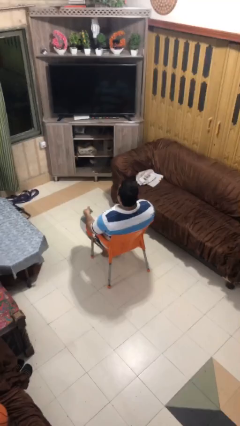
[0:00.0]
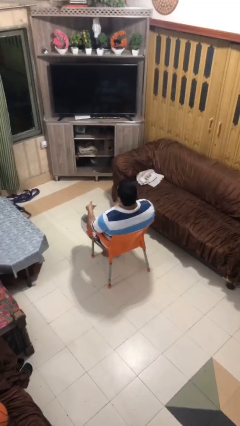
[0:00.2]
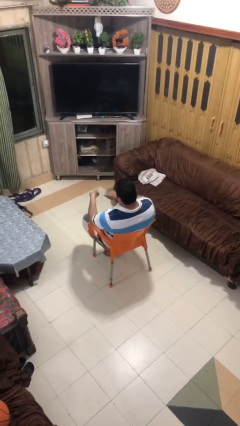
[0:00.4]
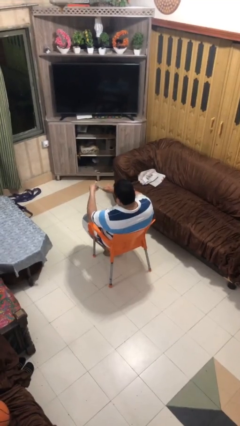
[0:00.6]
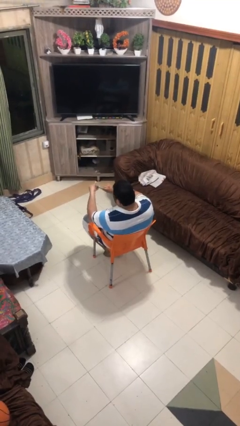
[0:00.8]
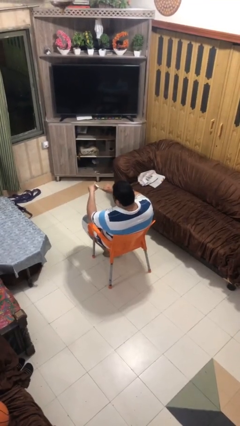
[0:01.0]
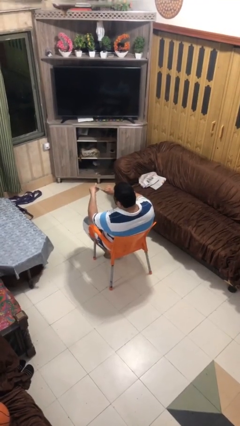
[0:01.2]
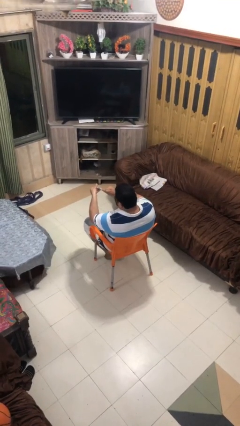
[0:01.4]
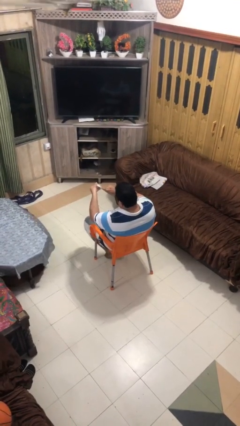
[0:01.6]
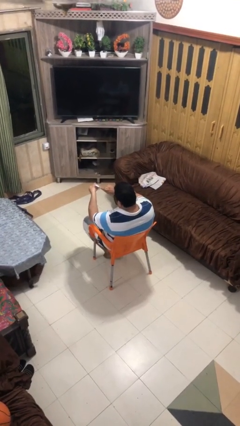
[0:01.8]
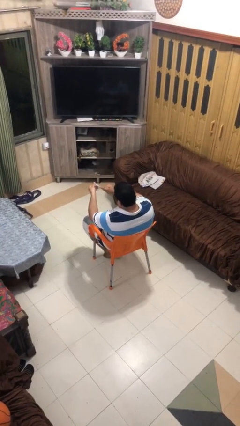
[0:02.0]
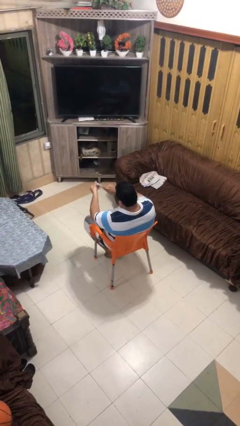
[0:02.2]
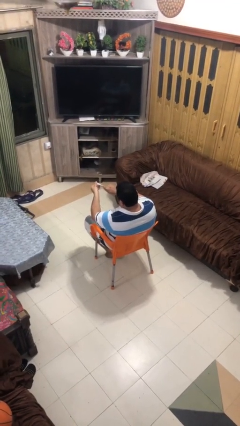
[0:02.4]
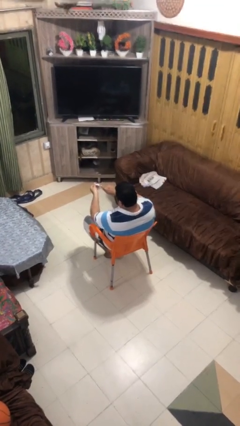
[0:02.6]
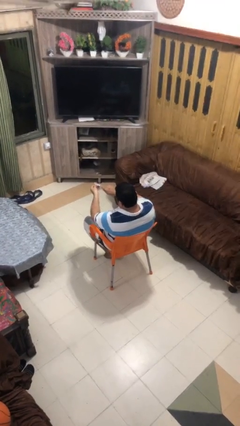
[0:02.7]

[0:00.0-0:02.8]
person clips fingernails

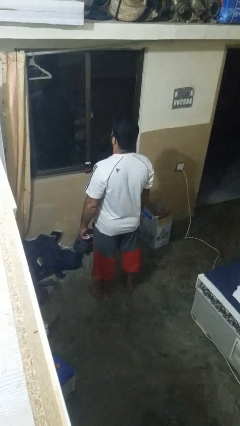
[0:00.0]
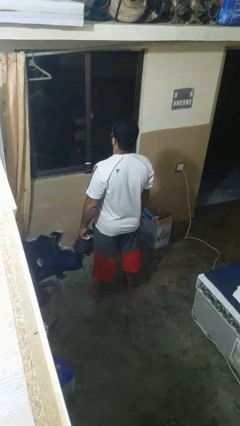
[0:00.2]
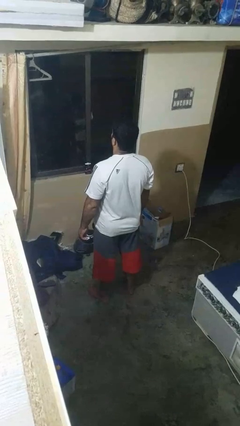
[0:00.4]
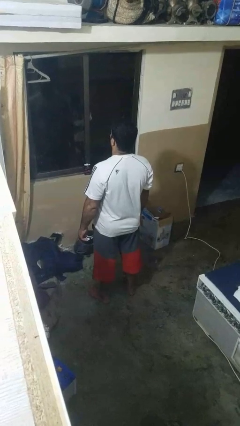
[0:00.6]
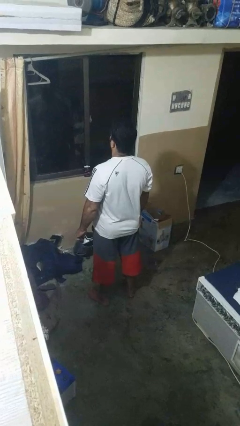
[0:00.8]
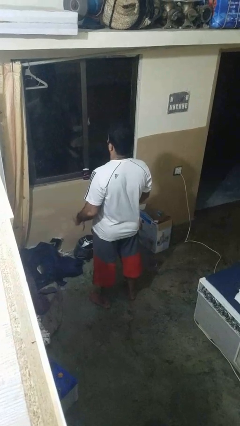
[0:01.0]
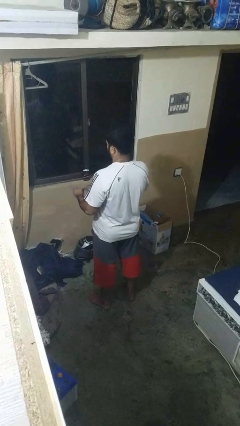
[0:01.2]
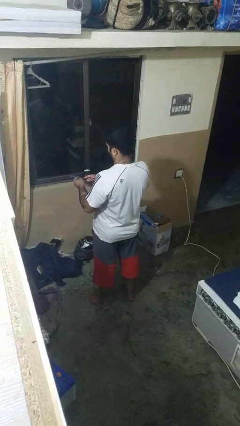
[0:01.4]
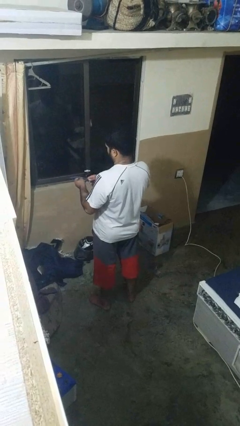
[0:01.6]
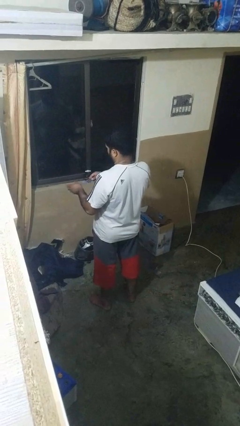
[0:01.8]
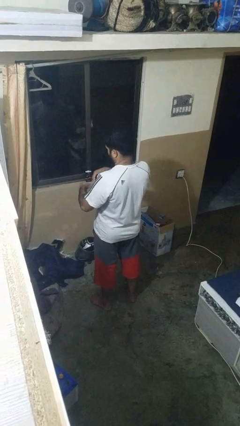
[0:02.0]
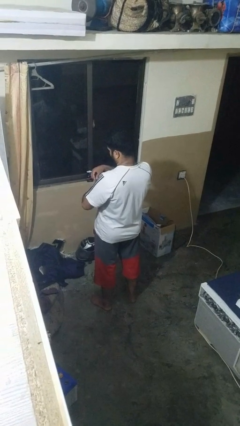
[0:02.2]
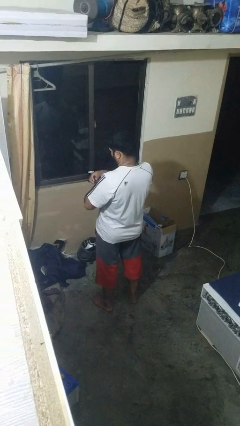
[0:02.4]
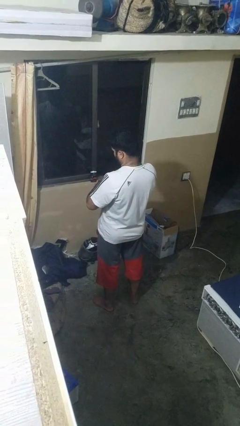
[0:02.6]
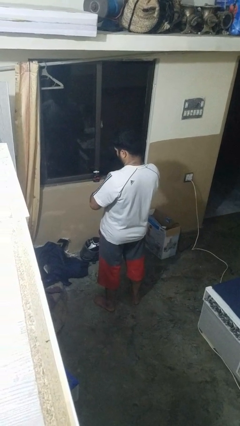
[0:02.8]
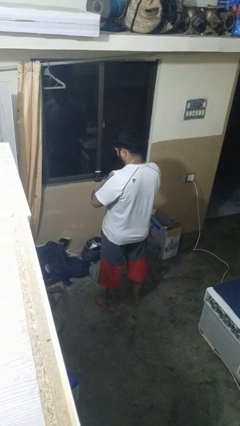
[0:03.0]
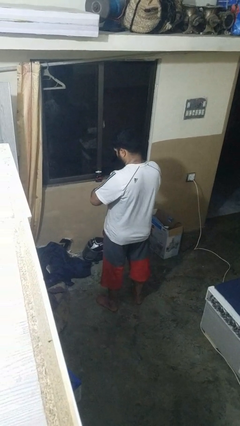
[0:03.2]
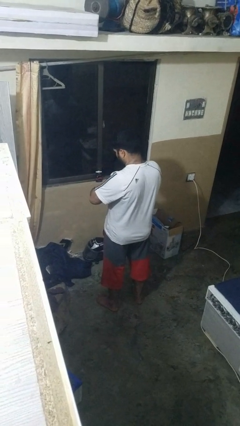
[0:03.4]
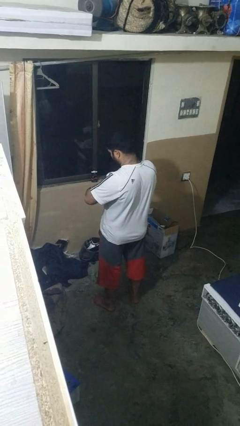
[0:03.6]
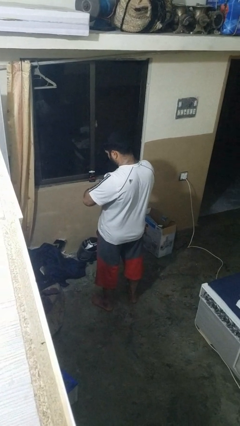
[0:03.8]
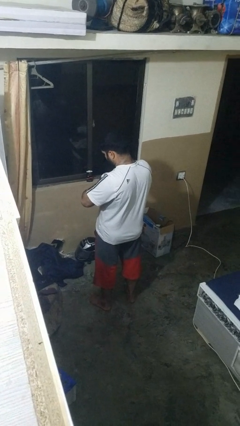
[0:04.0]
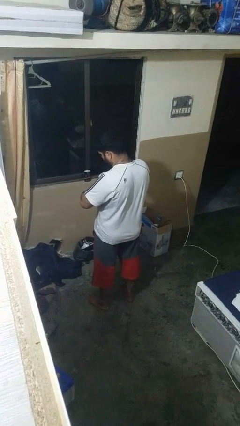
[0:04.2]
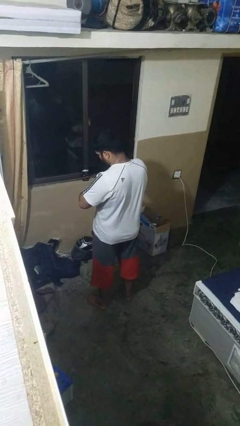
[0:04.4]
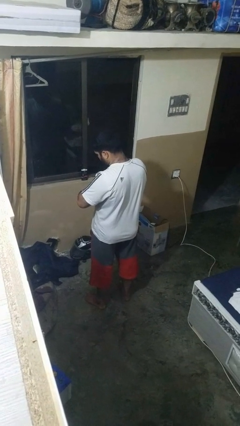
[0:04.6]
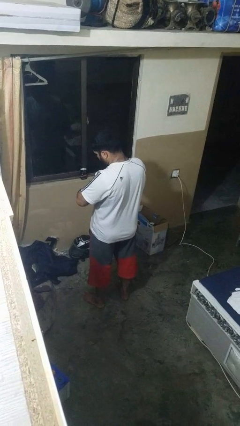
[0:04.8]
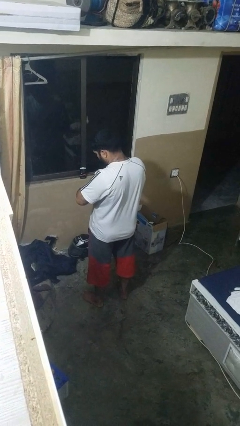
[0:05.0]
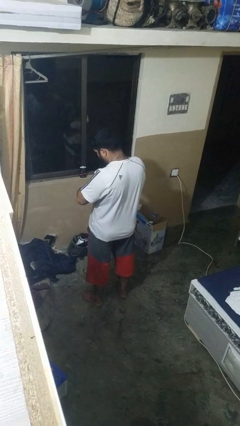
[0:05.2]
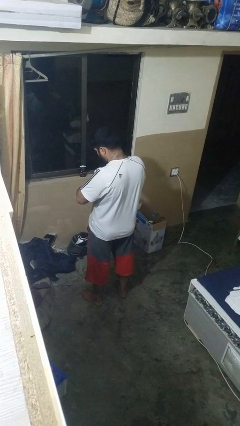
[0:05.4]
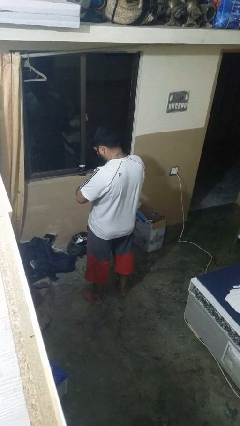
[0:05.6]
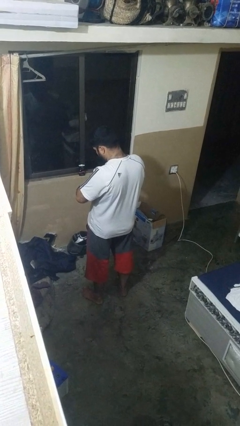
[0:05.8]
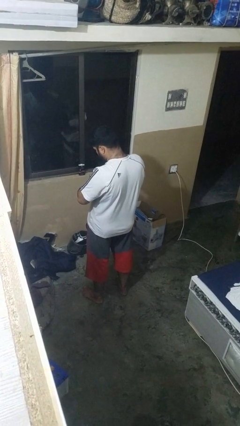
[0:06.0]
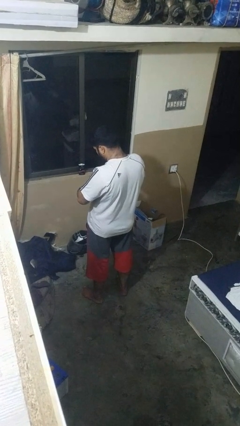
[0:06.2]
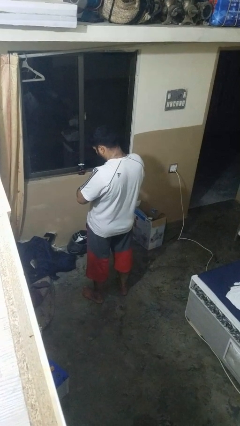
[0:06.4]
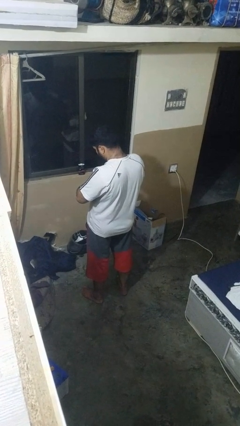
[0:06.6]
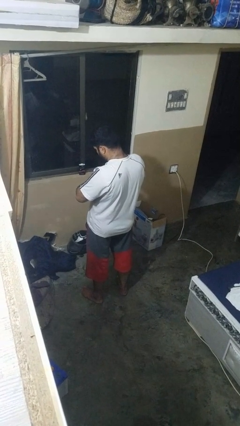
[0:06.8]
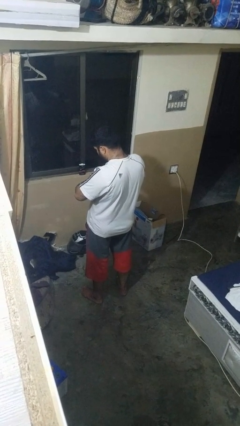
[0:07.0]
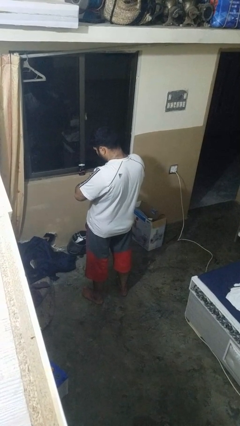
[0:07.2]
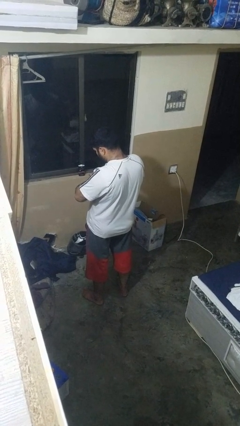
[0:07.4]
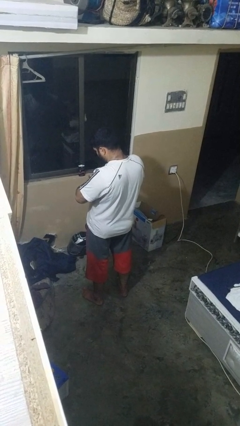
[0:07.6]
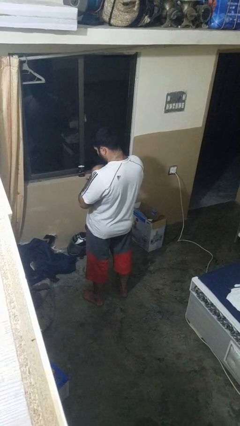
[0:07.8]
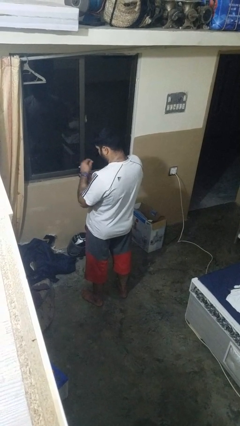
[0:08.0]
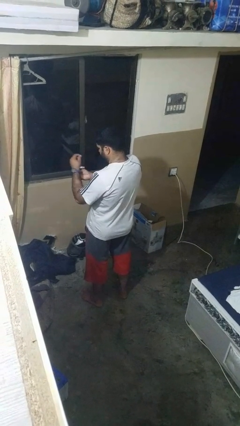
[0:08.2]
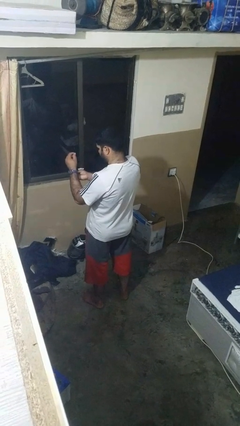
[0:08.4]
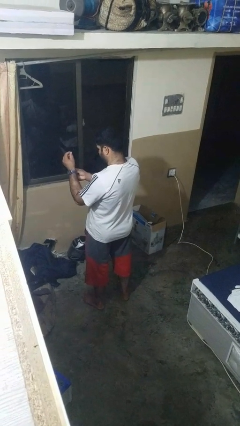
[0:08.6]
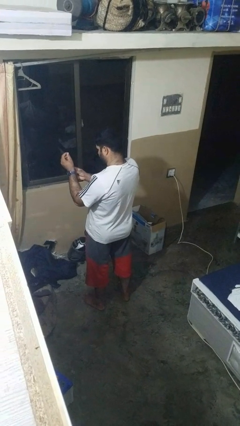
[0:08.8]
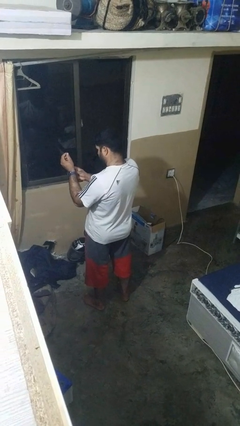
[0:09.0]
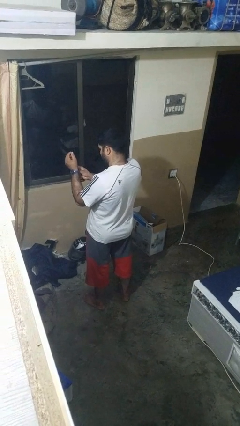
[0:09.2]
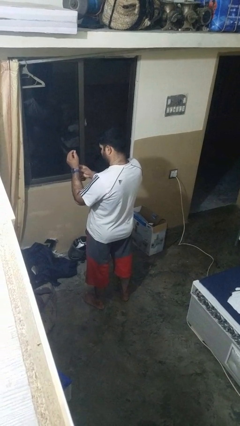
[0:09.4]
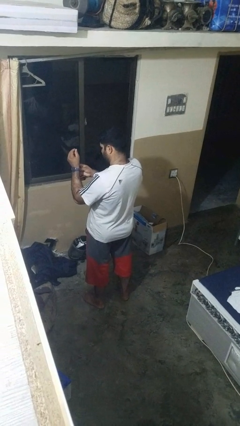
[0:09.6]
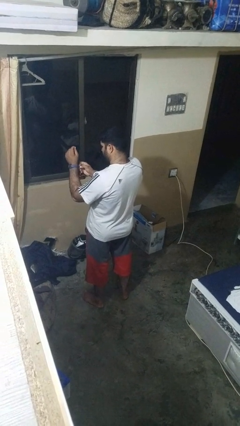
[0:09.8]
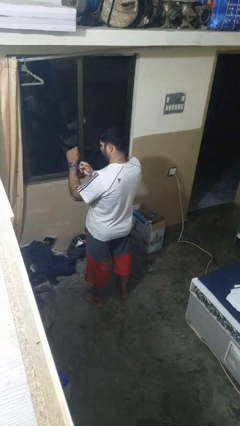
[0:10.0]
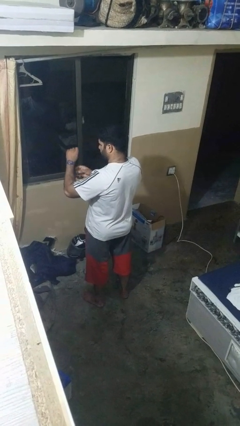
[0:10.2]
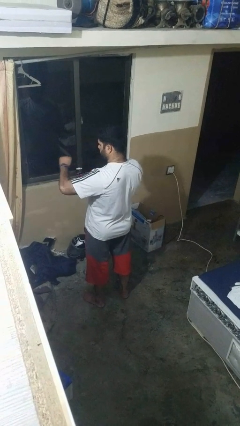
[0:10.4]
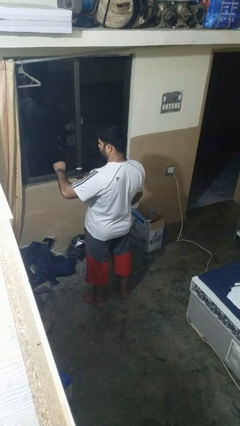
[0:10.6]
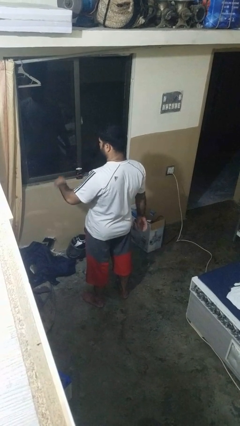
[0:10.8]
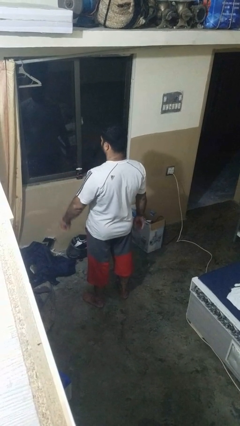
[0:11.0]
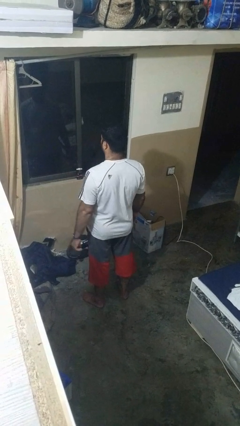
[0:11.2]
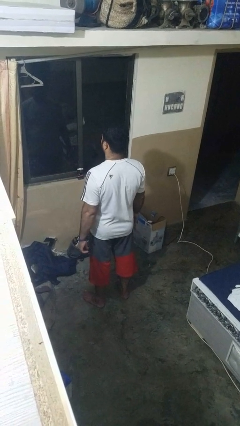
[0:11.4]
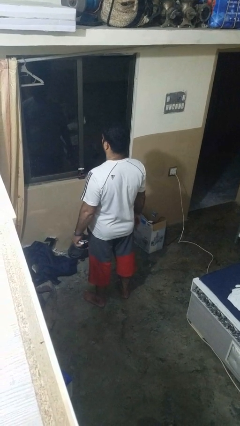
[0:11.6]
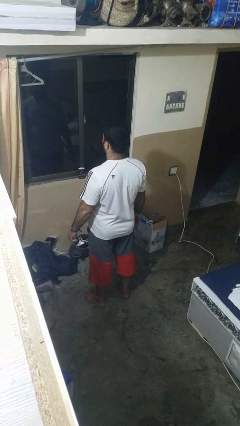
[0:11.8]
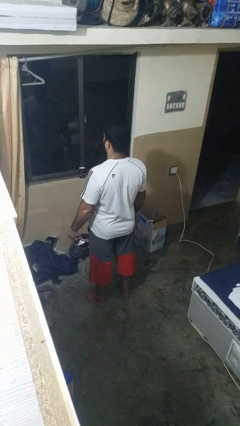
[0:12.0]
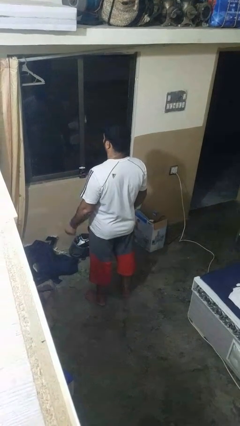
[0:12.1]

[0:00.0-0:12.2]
person puts on wristwatch

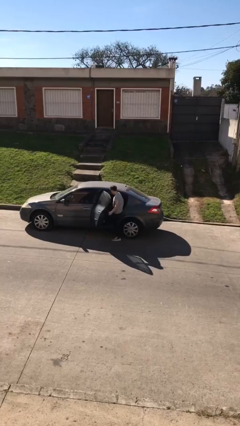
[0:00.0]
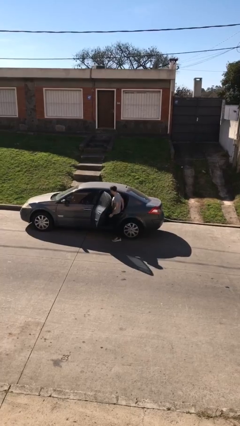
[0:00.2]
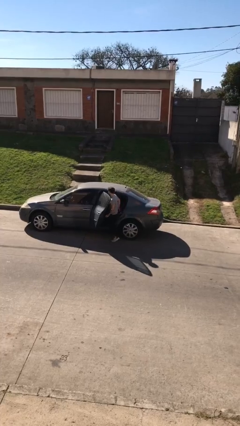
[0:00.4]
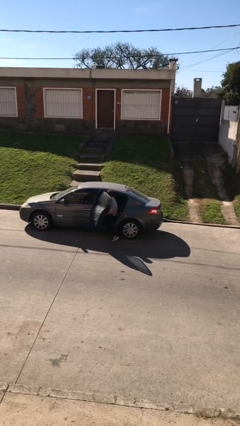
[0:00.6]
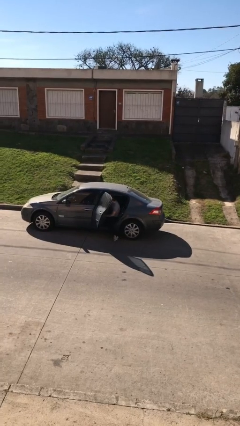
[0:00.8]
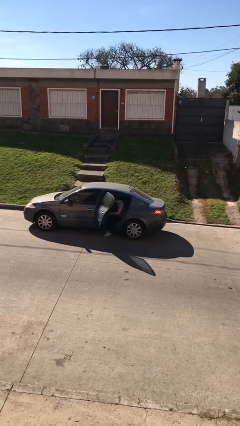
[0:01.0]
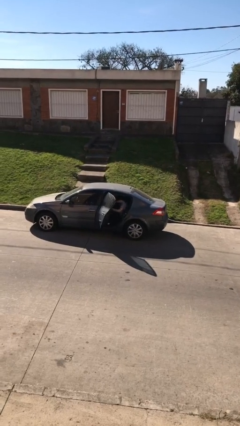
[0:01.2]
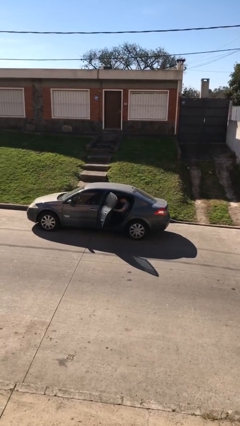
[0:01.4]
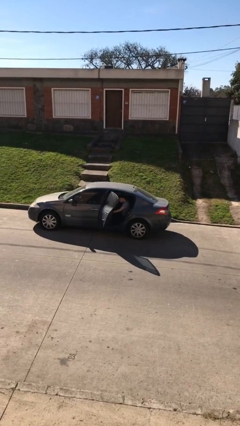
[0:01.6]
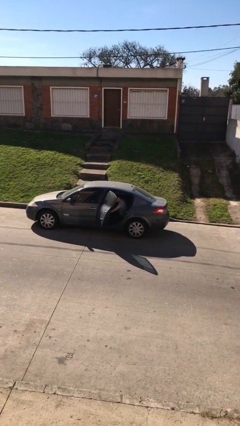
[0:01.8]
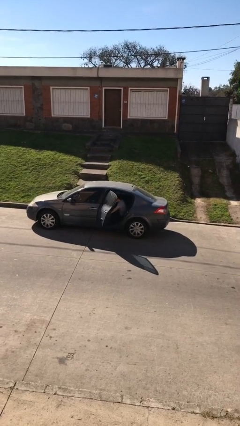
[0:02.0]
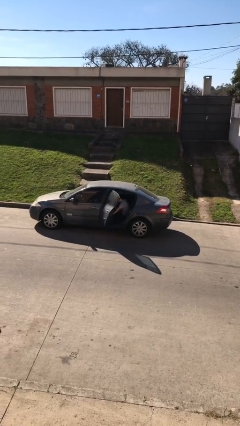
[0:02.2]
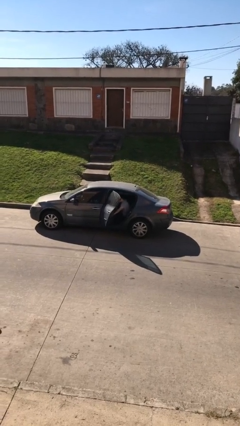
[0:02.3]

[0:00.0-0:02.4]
person enters car

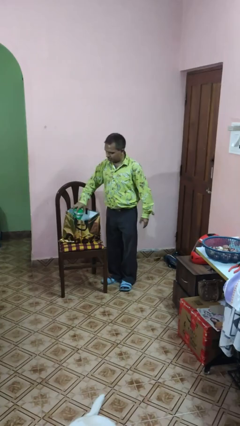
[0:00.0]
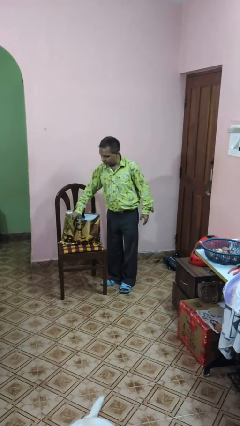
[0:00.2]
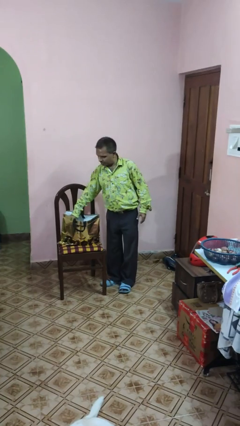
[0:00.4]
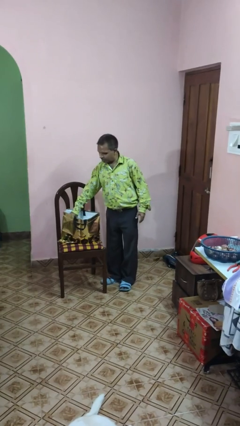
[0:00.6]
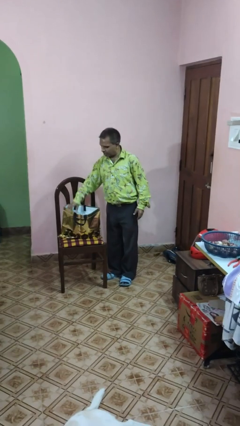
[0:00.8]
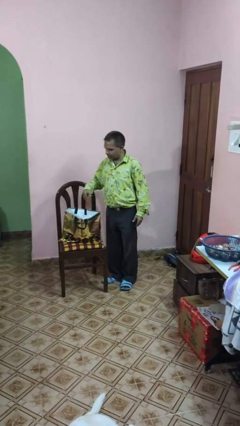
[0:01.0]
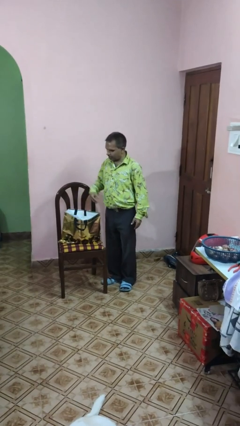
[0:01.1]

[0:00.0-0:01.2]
person puts object into bag
